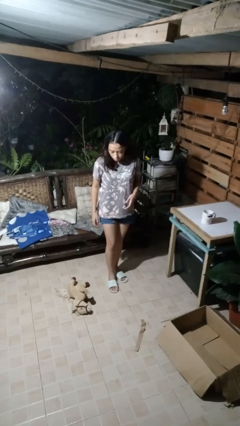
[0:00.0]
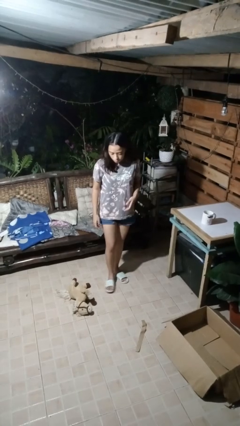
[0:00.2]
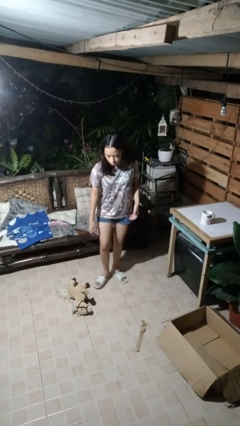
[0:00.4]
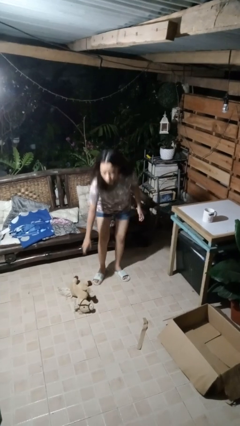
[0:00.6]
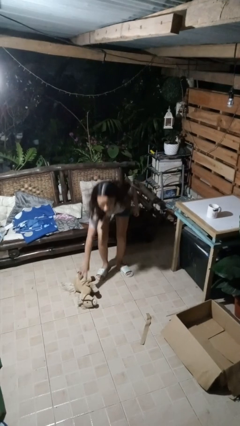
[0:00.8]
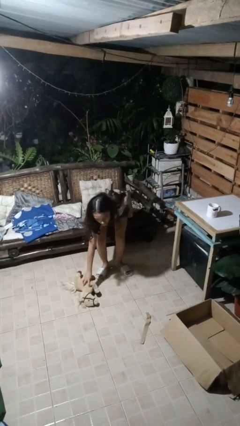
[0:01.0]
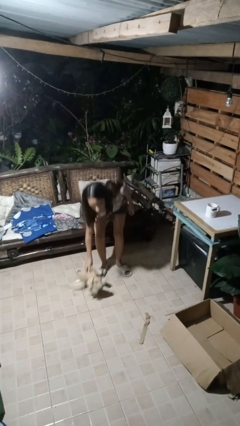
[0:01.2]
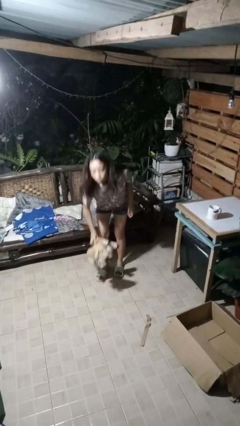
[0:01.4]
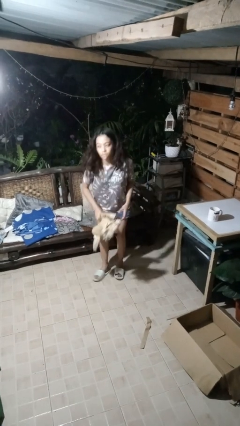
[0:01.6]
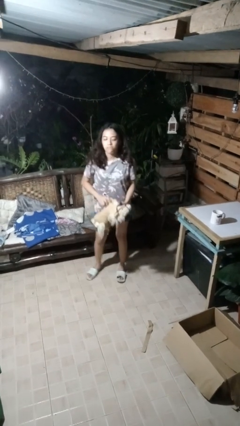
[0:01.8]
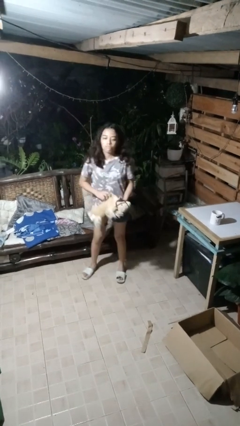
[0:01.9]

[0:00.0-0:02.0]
person picks up object from floor

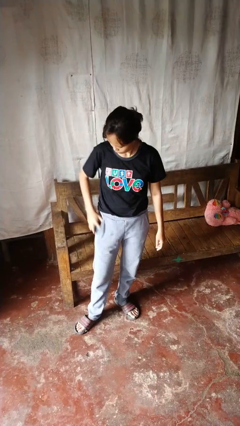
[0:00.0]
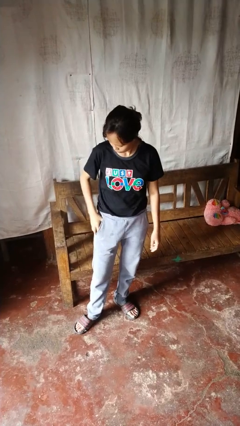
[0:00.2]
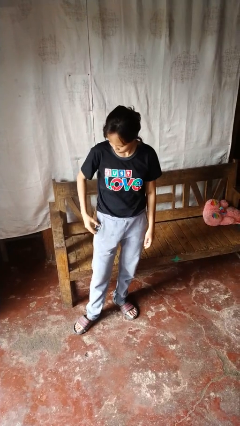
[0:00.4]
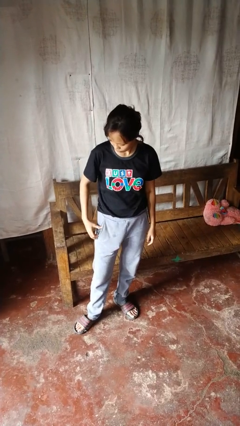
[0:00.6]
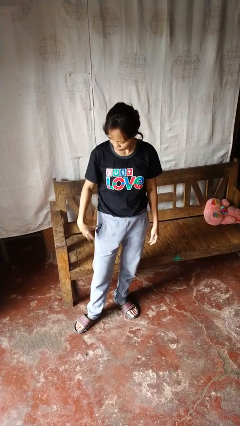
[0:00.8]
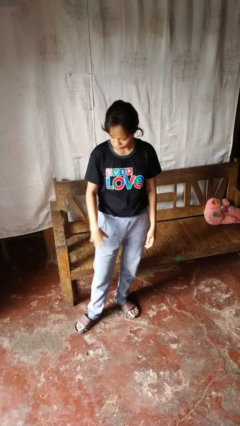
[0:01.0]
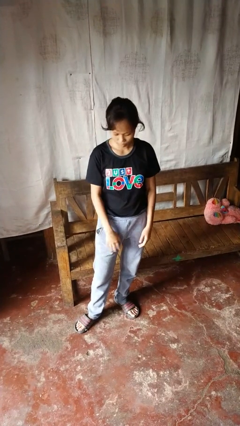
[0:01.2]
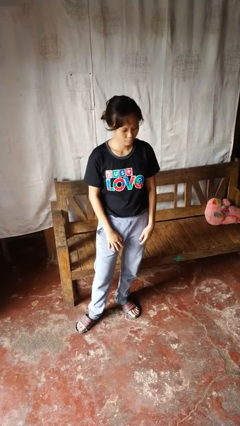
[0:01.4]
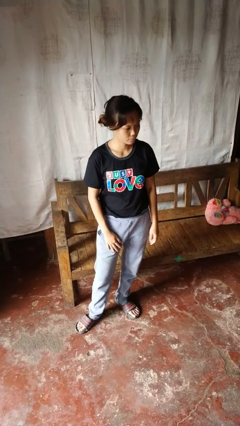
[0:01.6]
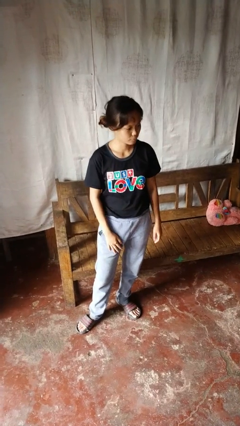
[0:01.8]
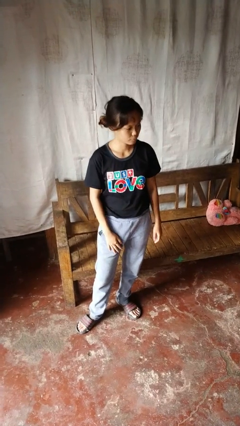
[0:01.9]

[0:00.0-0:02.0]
person puts phone into pocket

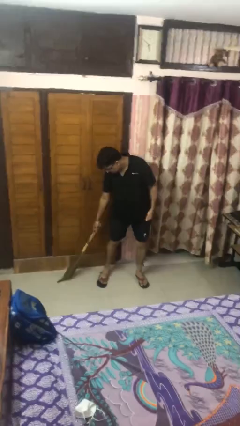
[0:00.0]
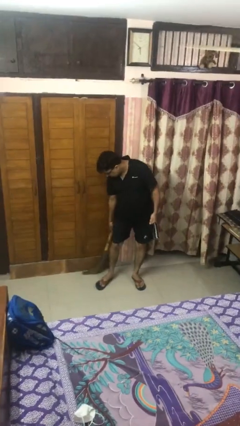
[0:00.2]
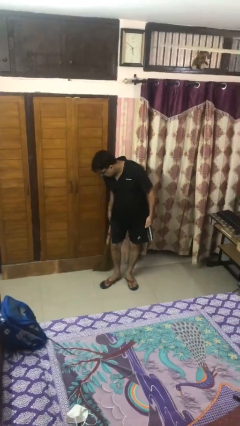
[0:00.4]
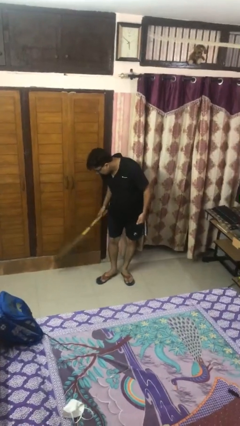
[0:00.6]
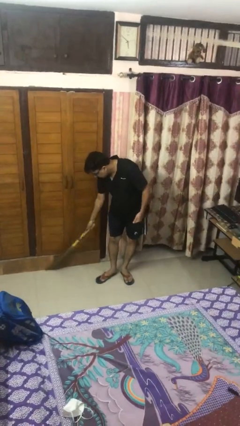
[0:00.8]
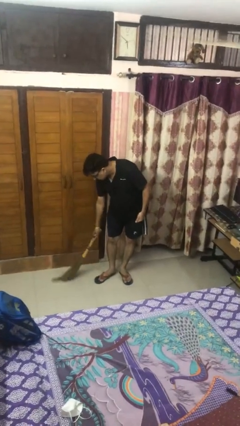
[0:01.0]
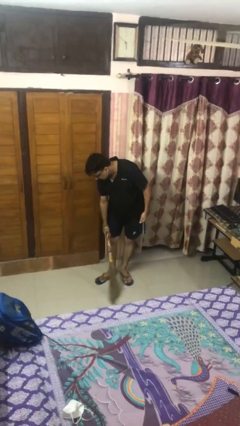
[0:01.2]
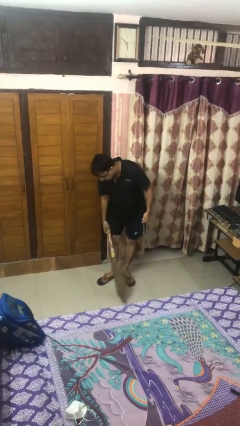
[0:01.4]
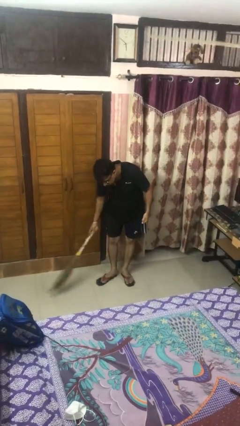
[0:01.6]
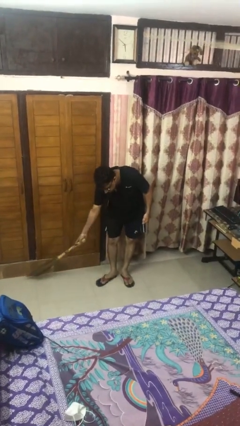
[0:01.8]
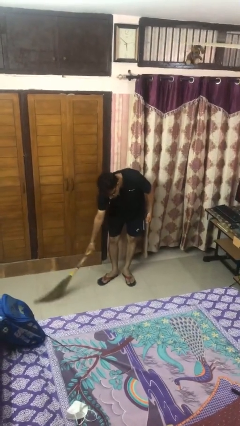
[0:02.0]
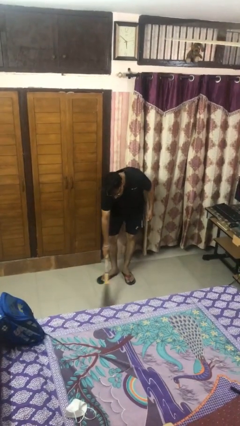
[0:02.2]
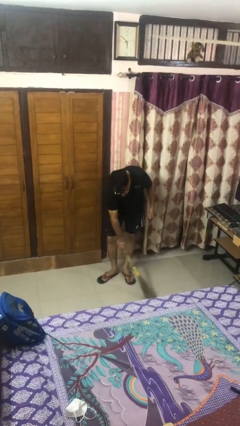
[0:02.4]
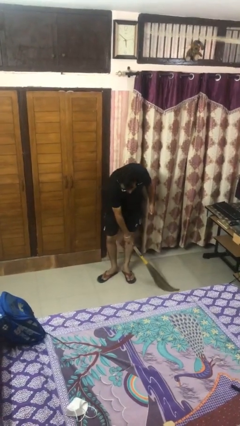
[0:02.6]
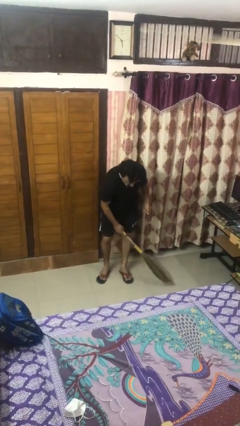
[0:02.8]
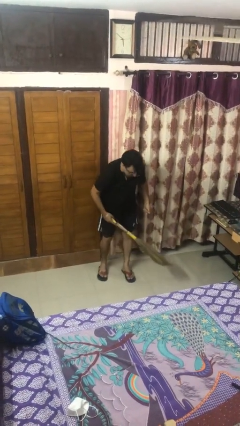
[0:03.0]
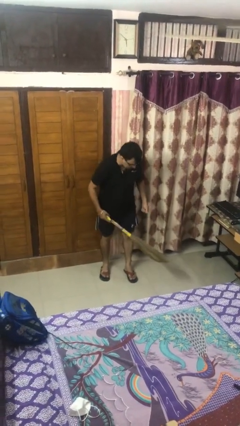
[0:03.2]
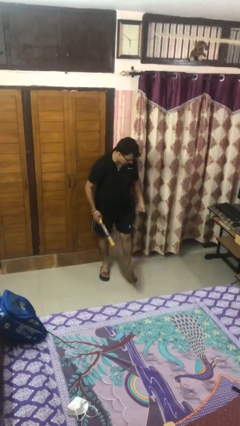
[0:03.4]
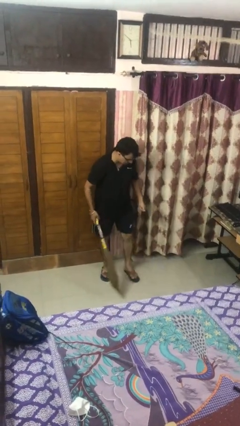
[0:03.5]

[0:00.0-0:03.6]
person sweeps floor

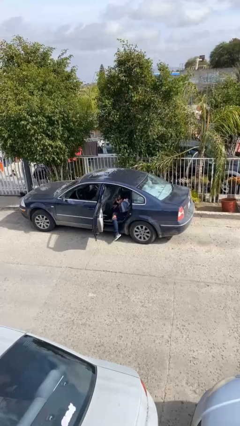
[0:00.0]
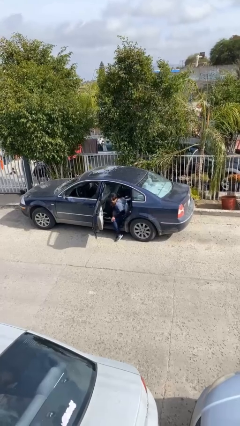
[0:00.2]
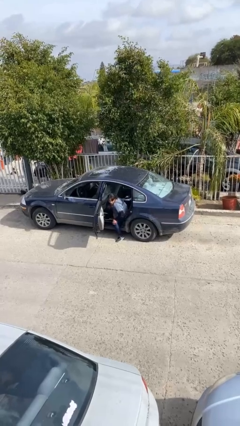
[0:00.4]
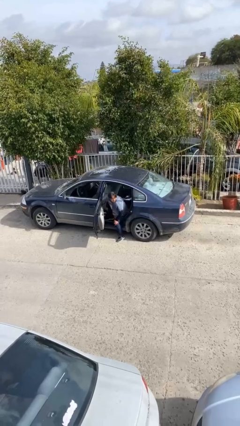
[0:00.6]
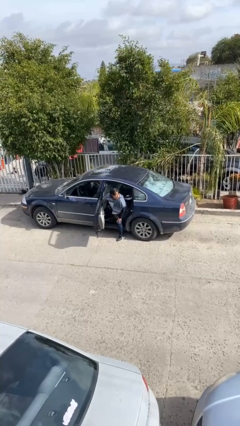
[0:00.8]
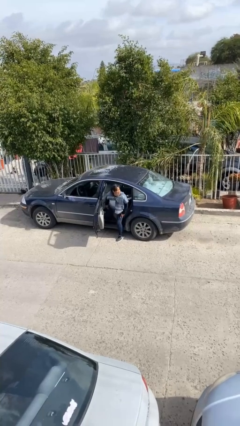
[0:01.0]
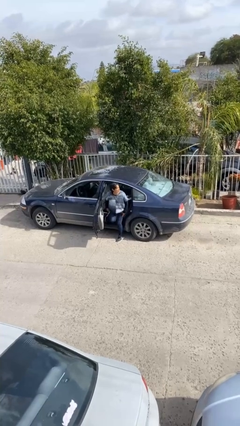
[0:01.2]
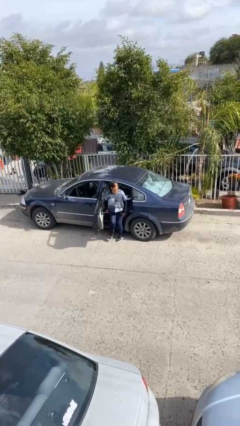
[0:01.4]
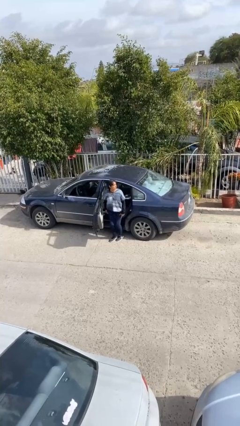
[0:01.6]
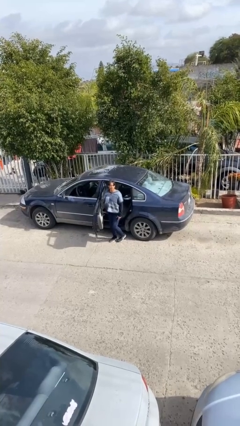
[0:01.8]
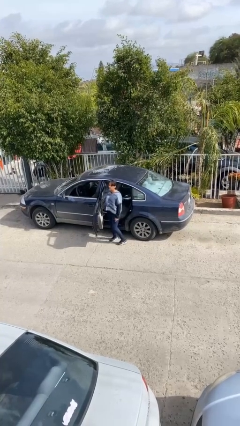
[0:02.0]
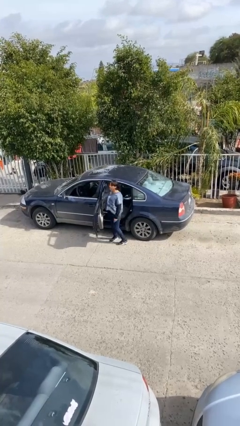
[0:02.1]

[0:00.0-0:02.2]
person exits car

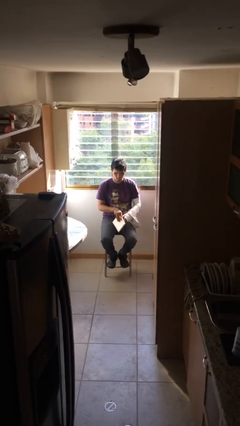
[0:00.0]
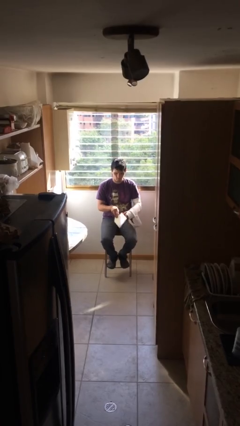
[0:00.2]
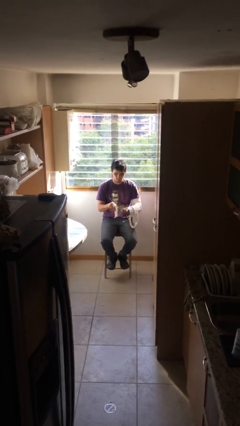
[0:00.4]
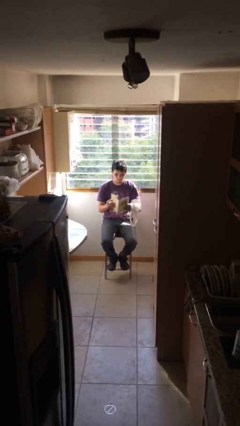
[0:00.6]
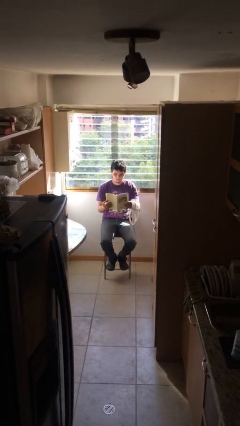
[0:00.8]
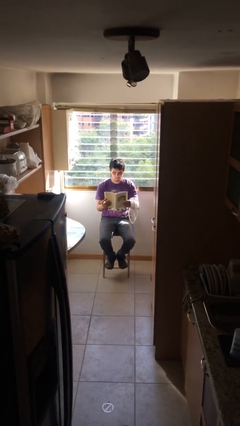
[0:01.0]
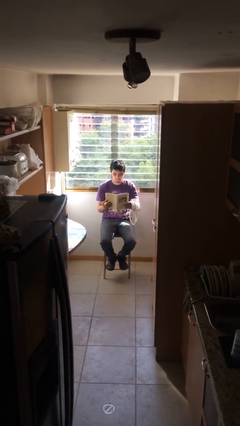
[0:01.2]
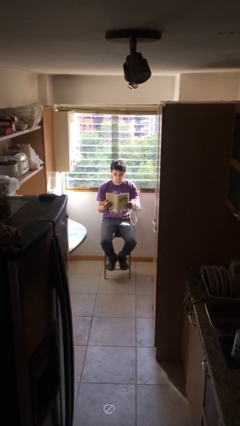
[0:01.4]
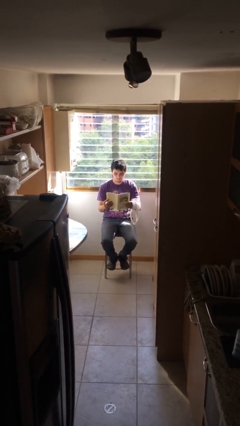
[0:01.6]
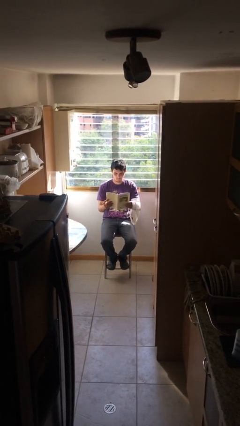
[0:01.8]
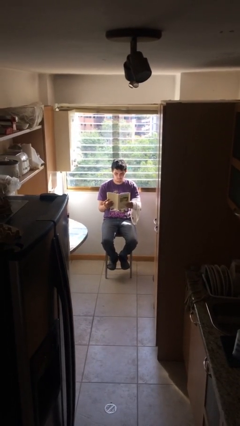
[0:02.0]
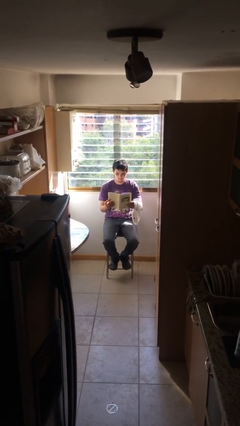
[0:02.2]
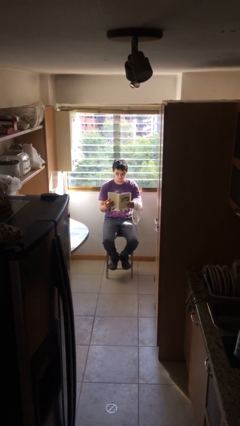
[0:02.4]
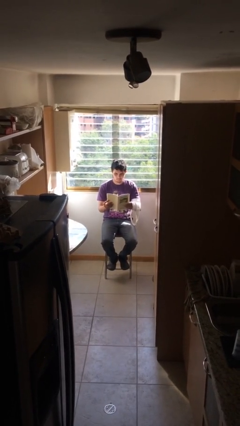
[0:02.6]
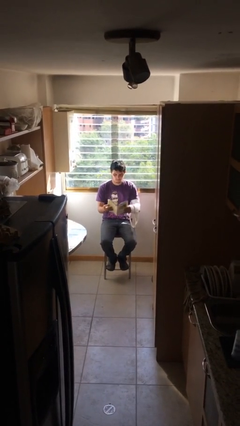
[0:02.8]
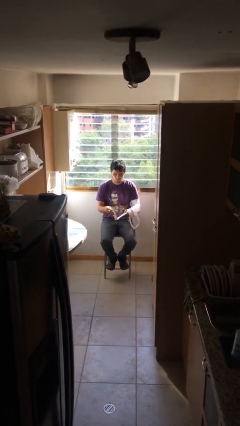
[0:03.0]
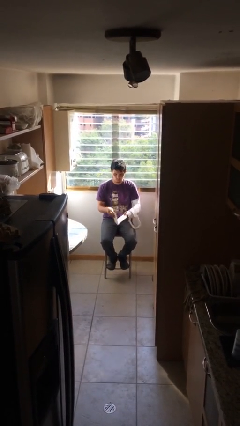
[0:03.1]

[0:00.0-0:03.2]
person reads document

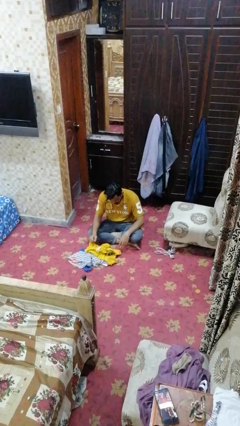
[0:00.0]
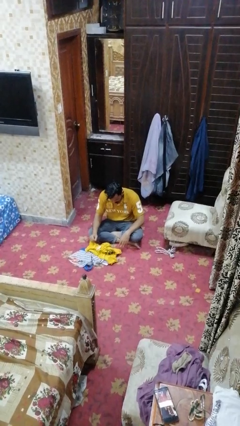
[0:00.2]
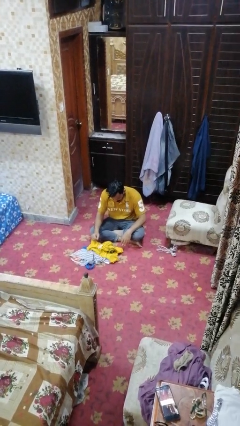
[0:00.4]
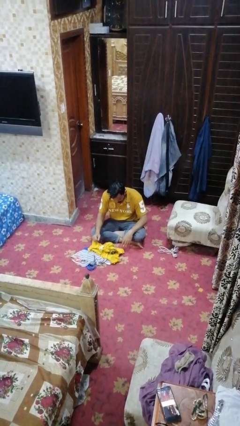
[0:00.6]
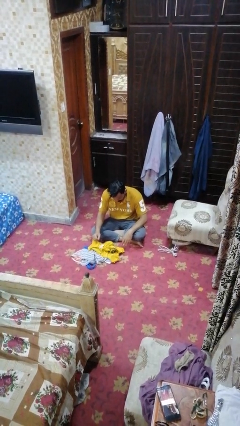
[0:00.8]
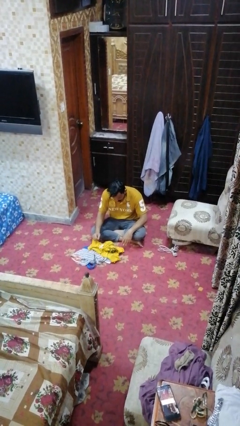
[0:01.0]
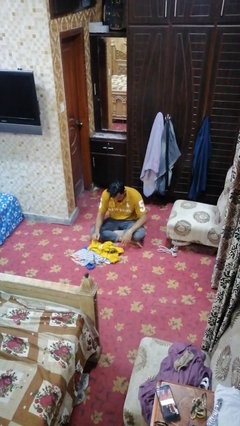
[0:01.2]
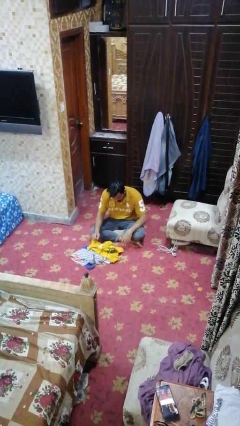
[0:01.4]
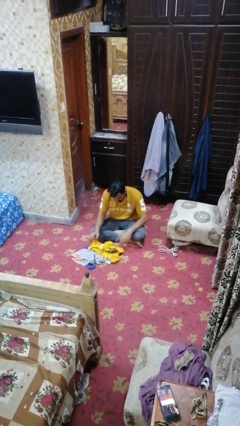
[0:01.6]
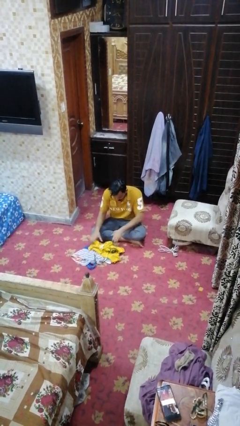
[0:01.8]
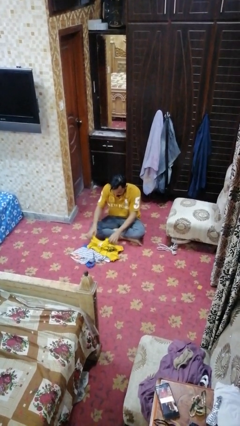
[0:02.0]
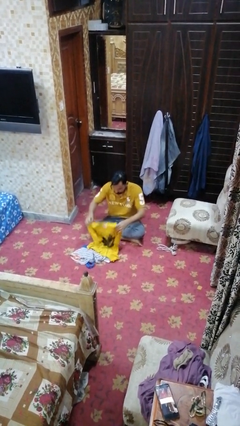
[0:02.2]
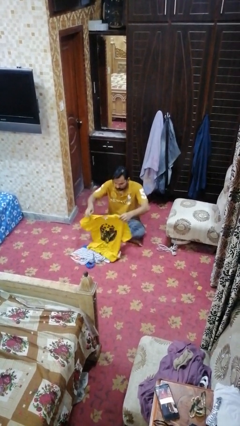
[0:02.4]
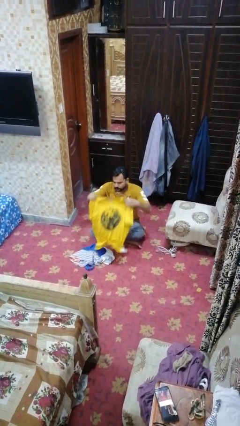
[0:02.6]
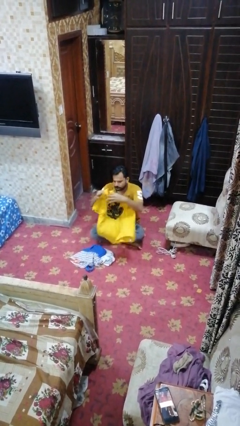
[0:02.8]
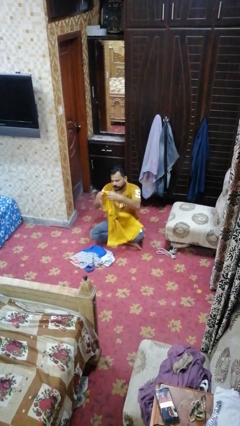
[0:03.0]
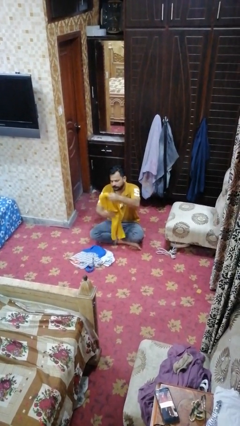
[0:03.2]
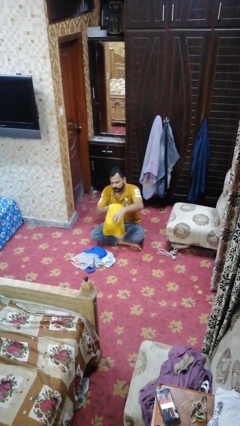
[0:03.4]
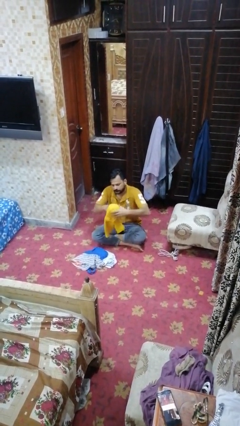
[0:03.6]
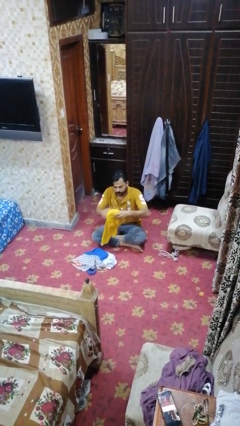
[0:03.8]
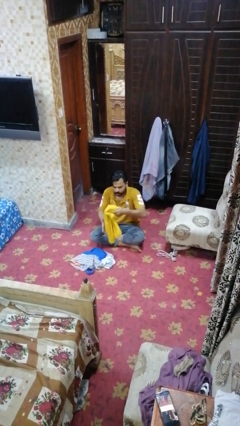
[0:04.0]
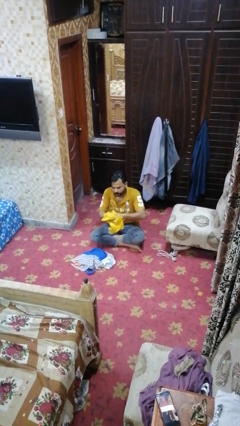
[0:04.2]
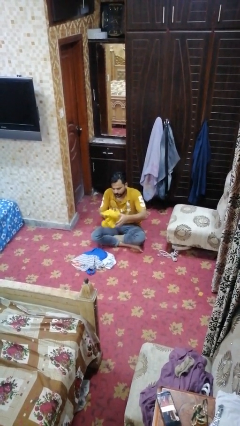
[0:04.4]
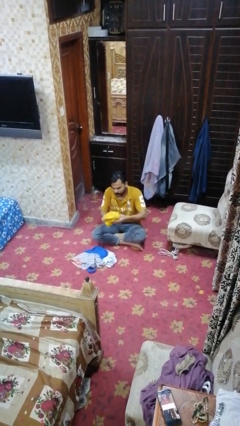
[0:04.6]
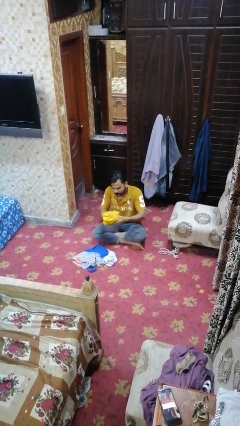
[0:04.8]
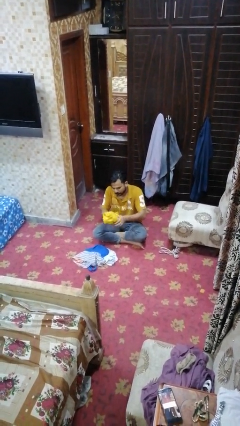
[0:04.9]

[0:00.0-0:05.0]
person folds shirt
